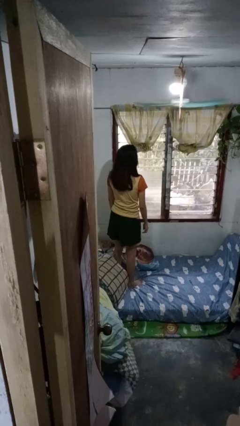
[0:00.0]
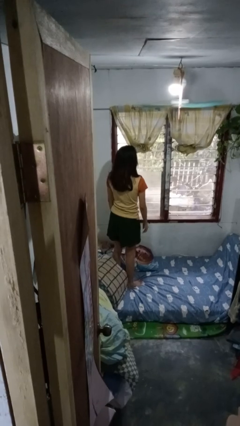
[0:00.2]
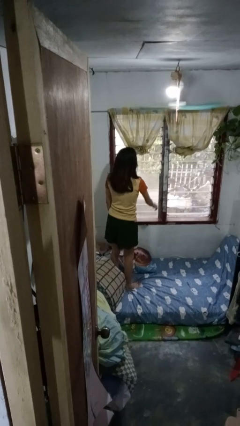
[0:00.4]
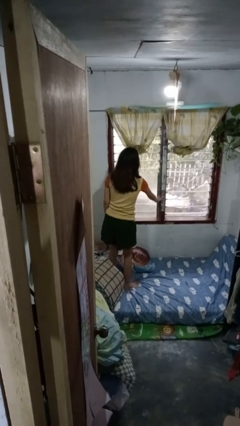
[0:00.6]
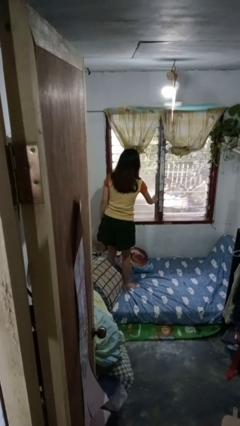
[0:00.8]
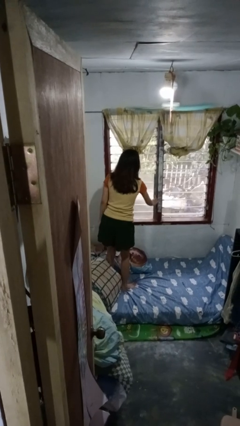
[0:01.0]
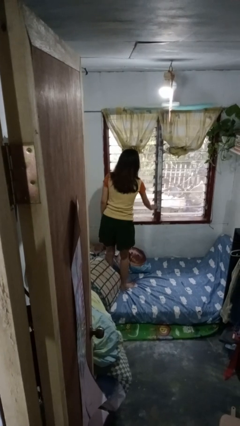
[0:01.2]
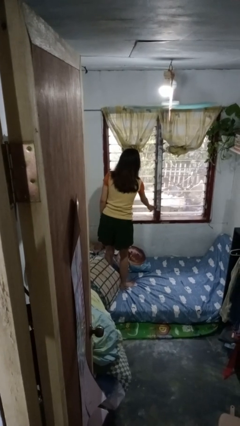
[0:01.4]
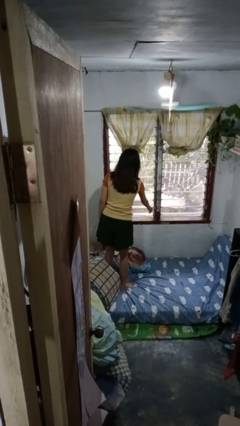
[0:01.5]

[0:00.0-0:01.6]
person opens home window

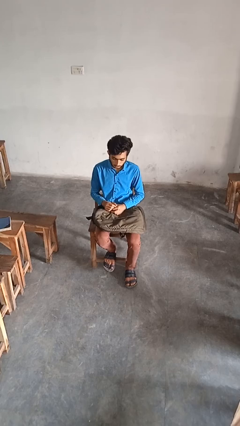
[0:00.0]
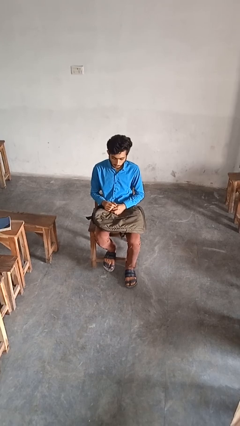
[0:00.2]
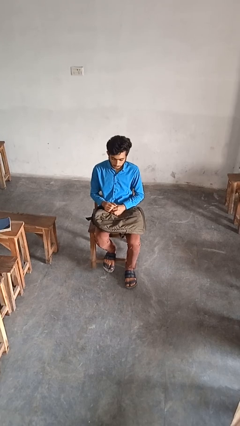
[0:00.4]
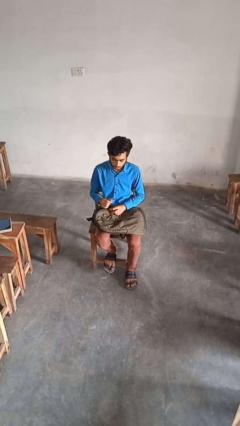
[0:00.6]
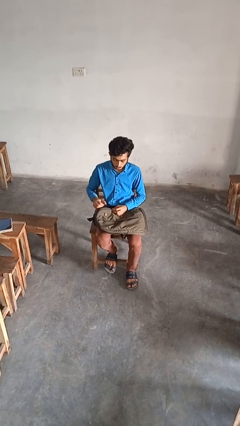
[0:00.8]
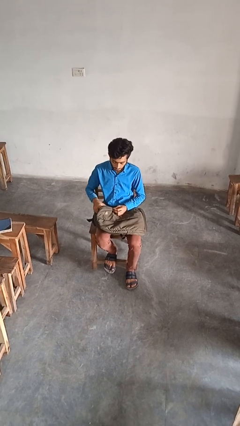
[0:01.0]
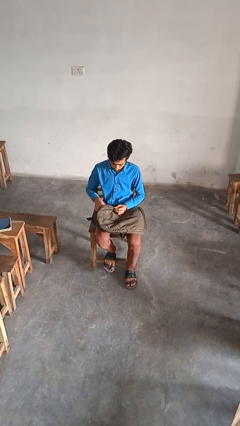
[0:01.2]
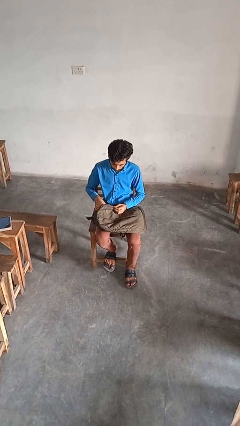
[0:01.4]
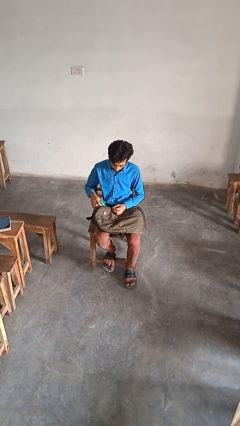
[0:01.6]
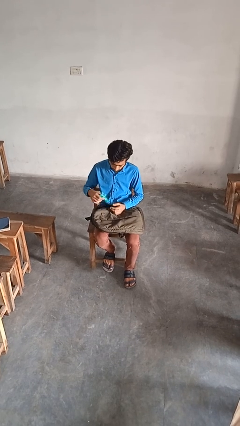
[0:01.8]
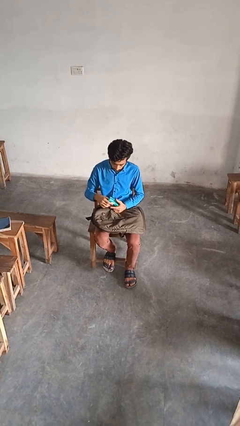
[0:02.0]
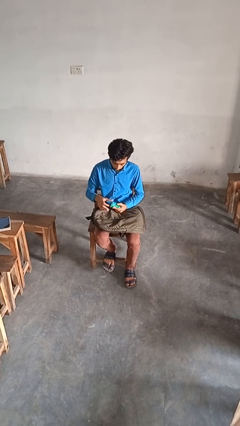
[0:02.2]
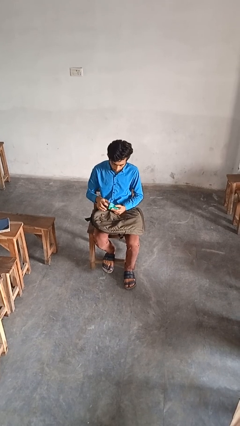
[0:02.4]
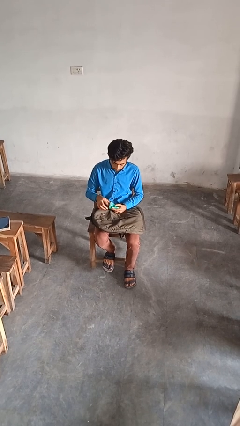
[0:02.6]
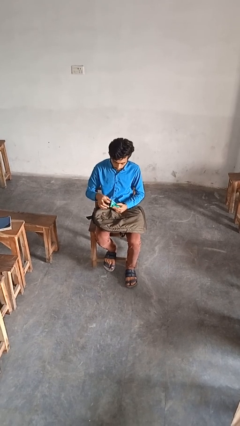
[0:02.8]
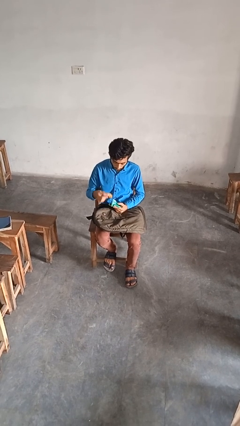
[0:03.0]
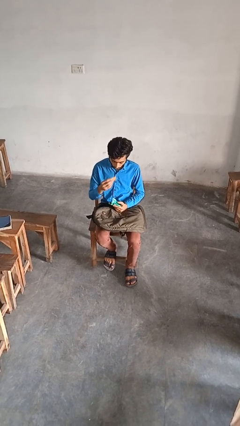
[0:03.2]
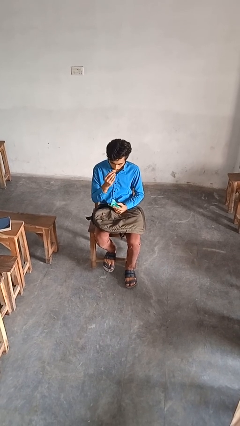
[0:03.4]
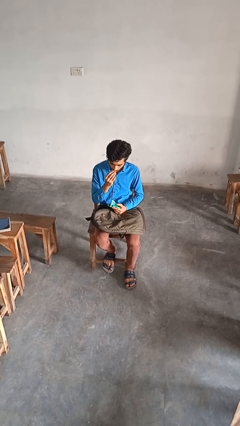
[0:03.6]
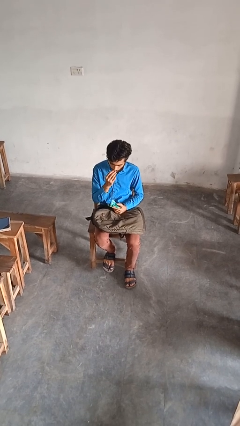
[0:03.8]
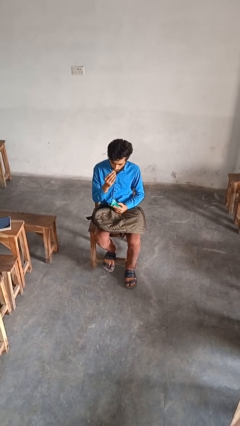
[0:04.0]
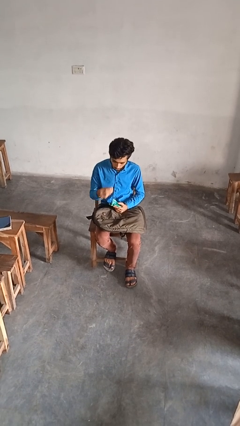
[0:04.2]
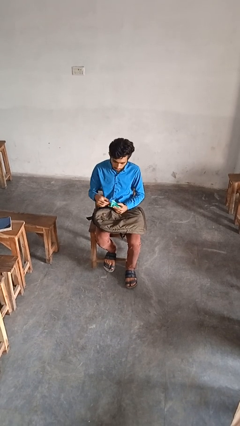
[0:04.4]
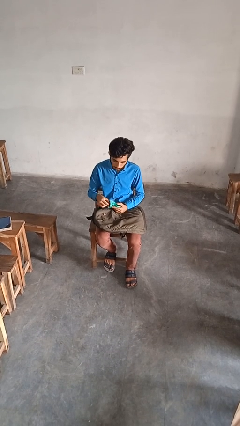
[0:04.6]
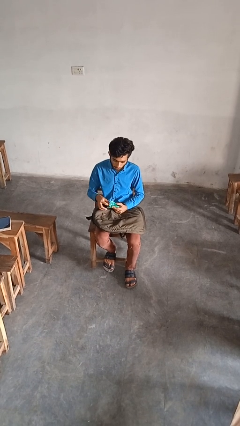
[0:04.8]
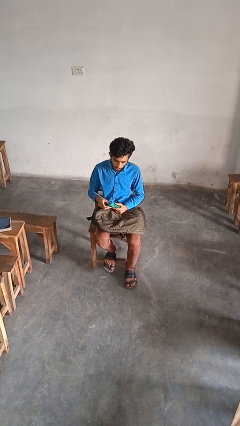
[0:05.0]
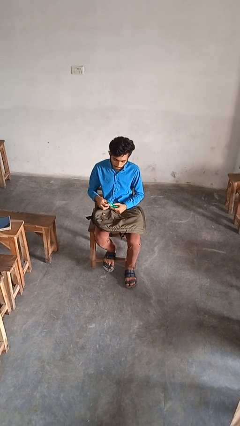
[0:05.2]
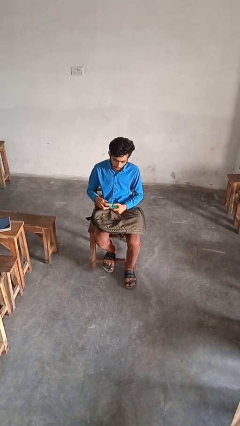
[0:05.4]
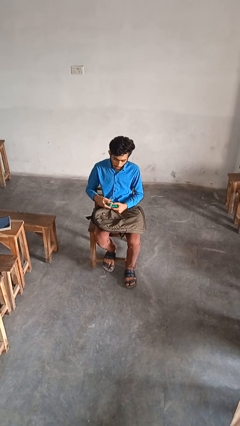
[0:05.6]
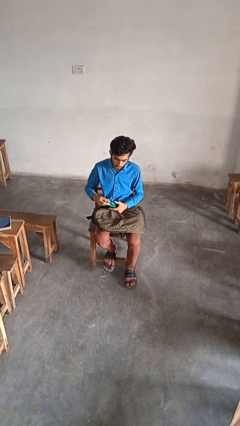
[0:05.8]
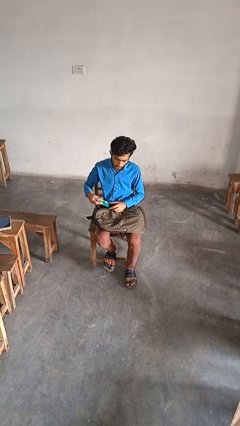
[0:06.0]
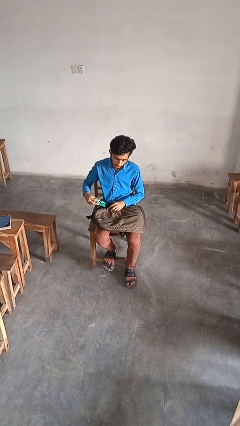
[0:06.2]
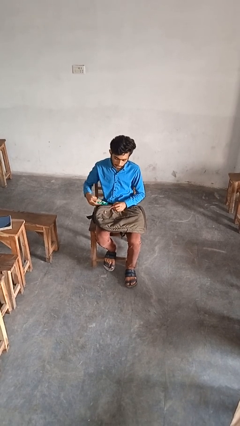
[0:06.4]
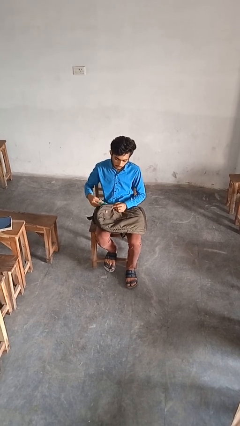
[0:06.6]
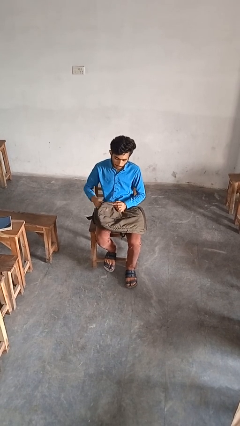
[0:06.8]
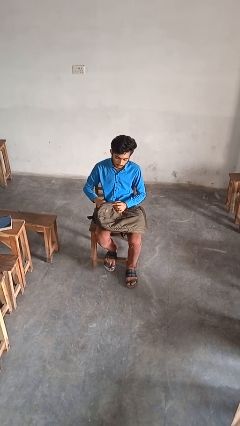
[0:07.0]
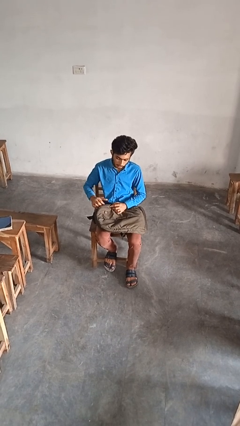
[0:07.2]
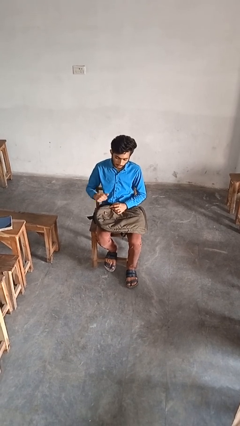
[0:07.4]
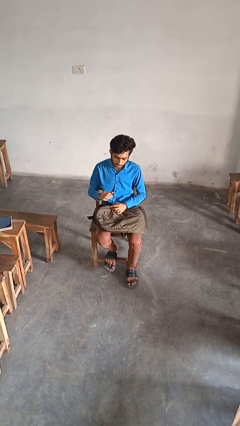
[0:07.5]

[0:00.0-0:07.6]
person eats snack from bag

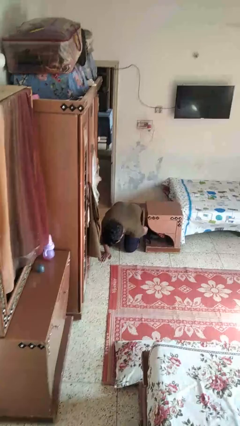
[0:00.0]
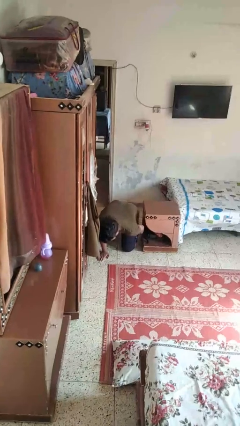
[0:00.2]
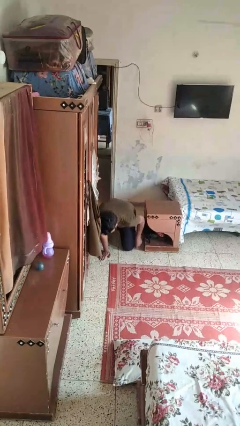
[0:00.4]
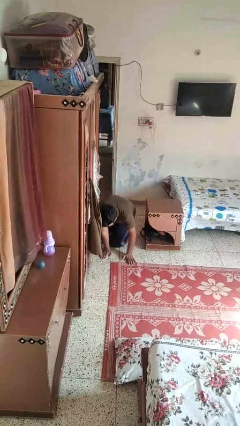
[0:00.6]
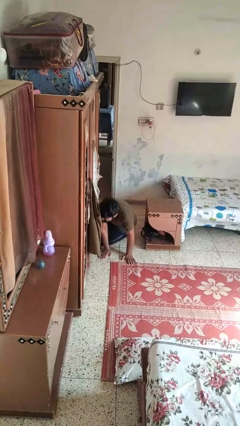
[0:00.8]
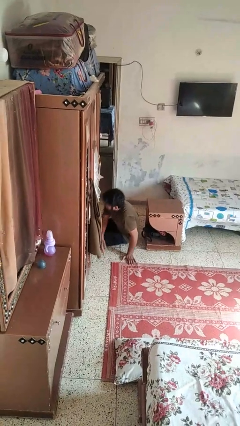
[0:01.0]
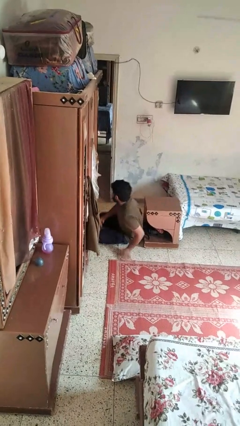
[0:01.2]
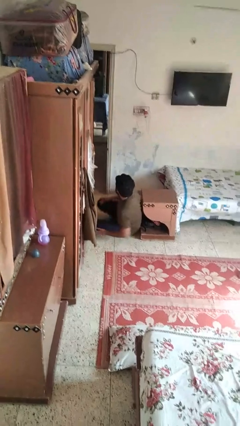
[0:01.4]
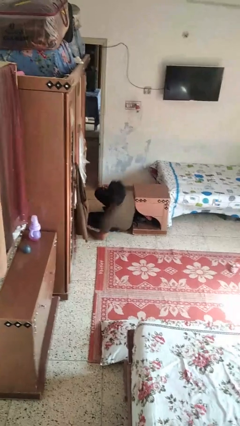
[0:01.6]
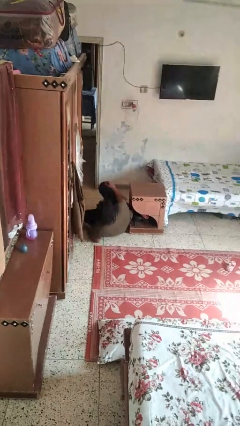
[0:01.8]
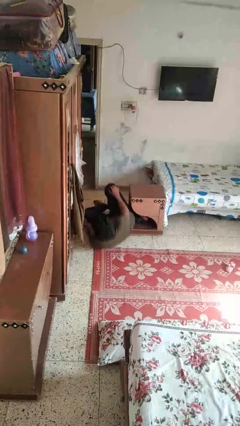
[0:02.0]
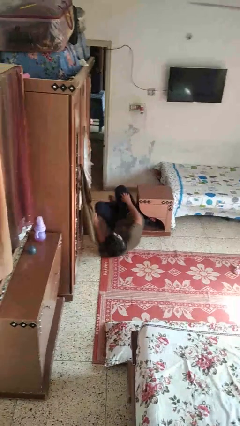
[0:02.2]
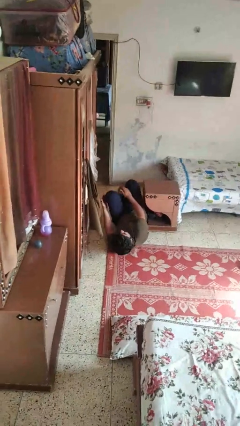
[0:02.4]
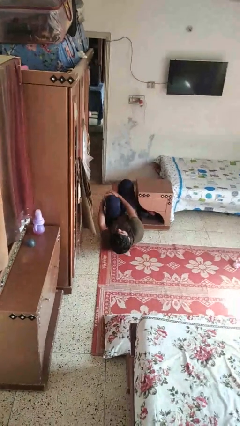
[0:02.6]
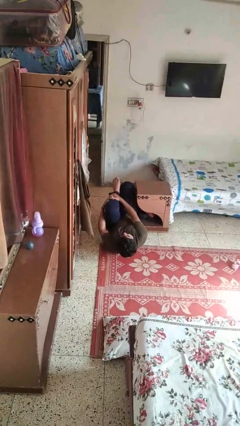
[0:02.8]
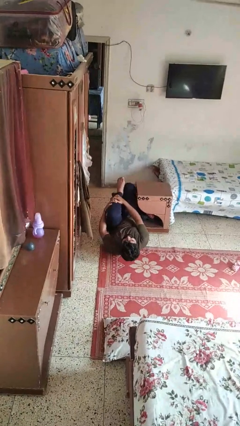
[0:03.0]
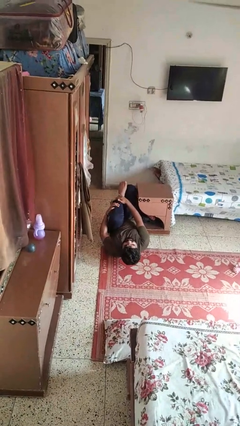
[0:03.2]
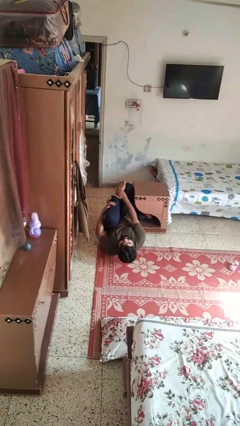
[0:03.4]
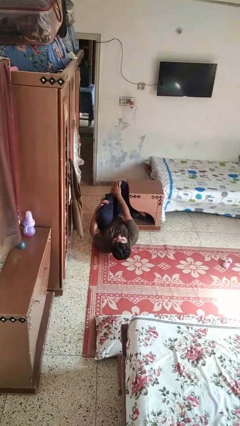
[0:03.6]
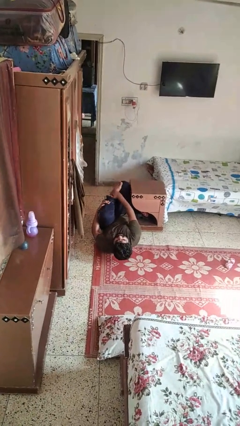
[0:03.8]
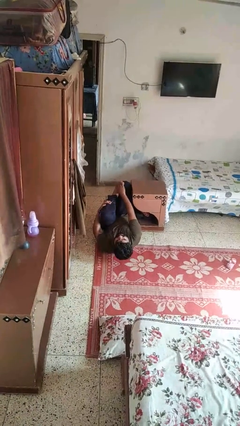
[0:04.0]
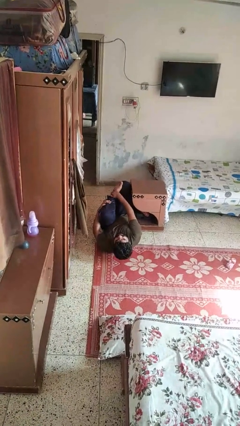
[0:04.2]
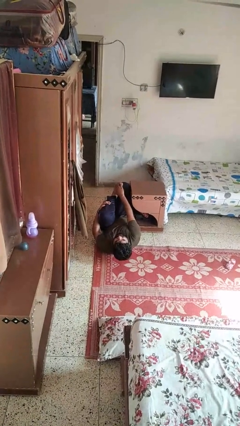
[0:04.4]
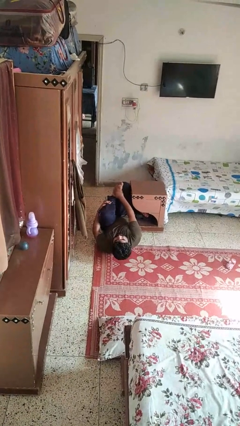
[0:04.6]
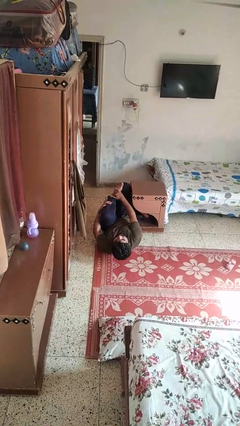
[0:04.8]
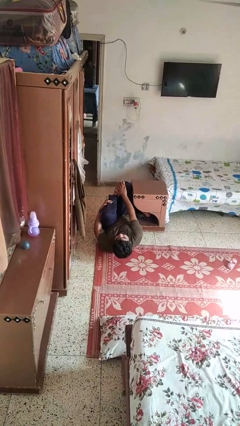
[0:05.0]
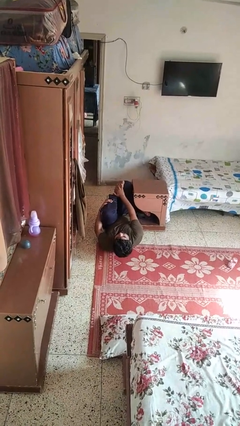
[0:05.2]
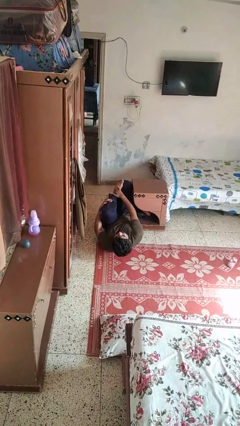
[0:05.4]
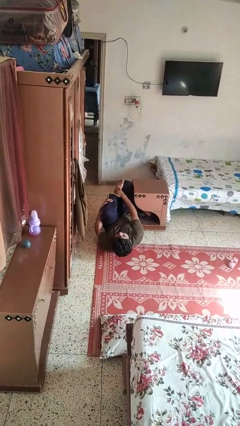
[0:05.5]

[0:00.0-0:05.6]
person lies down on floor

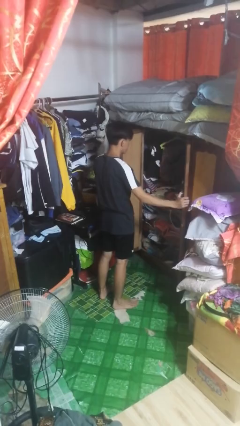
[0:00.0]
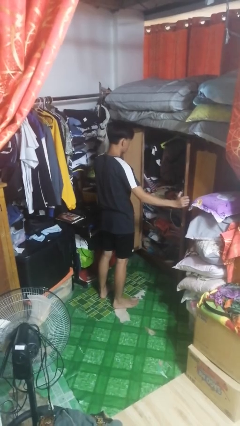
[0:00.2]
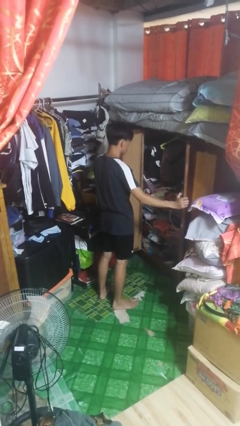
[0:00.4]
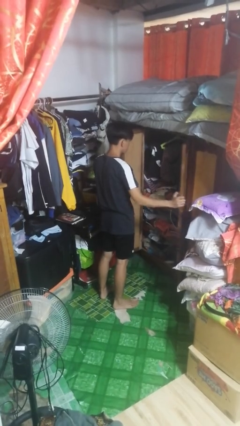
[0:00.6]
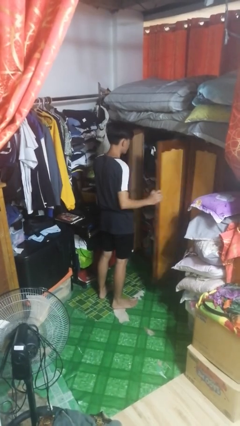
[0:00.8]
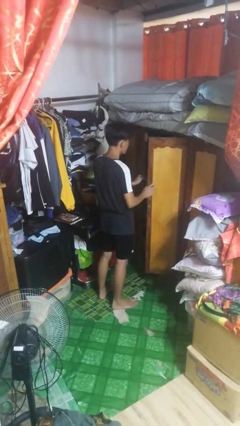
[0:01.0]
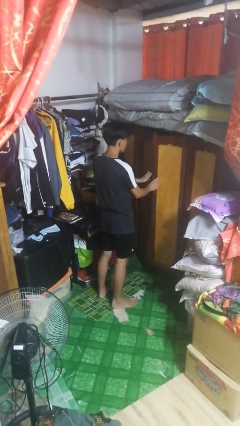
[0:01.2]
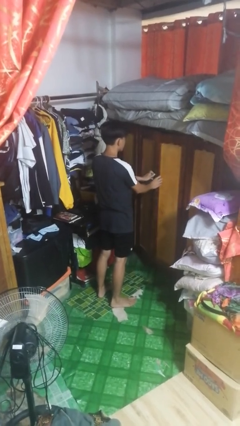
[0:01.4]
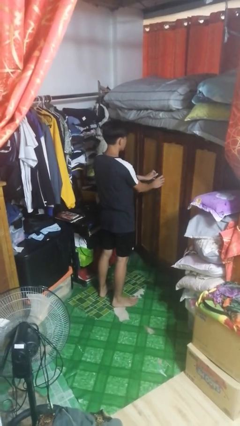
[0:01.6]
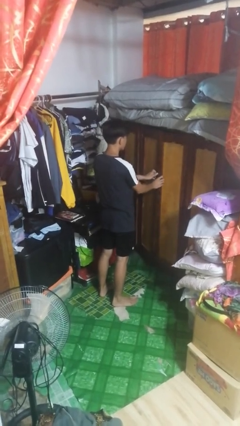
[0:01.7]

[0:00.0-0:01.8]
person closes dresser drawer

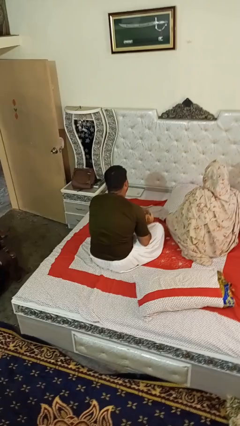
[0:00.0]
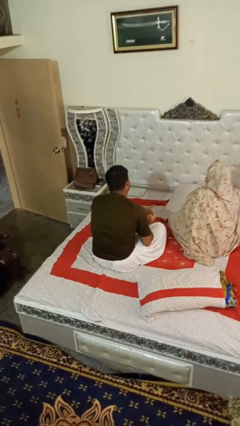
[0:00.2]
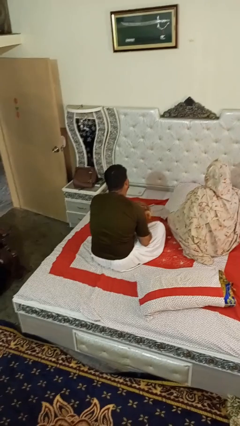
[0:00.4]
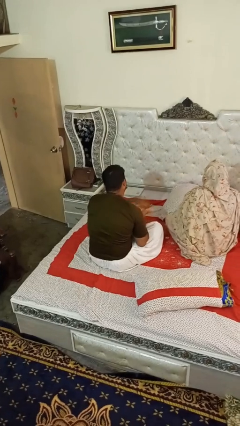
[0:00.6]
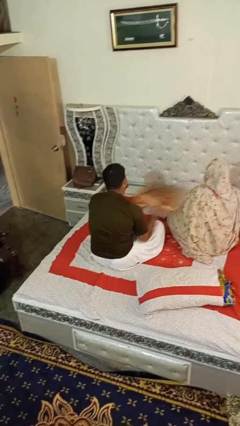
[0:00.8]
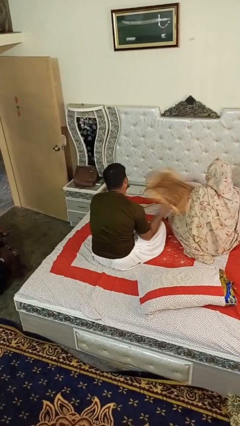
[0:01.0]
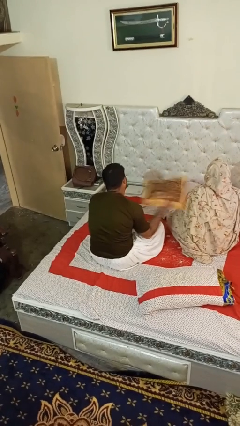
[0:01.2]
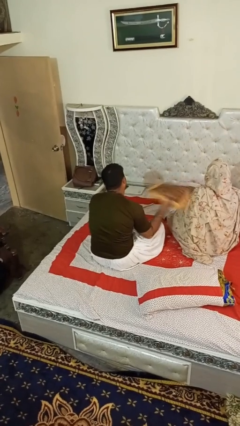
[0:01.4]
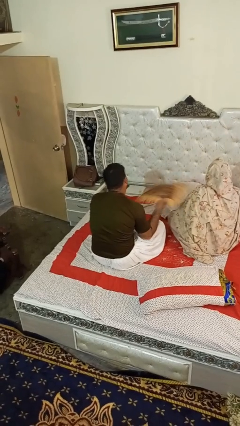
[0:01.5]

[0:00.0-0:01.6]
person hits person with pillow
